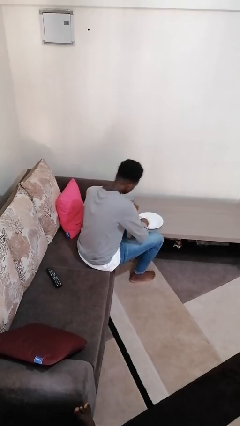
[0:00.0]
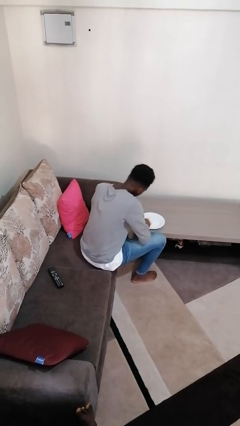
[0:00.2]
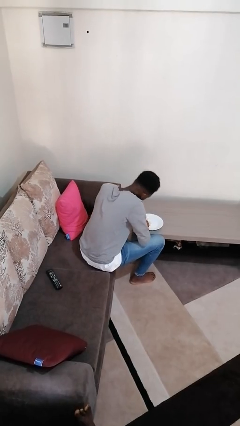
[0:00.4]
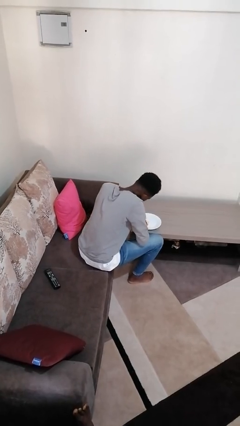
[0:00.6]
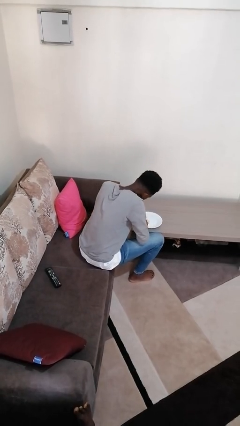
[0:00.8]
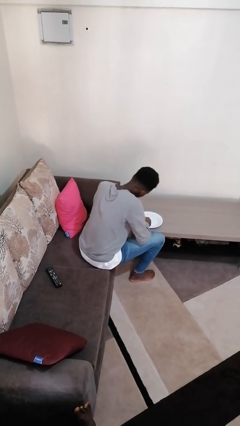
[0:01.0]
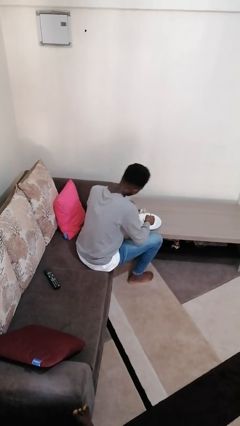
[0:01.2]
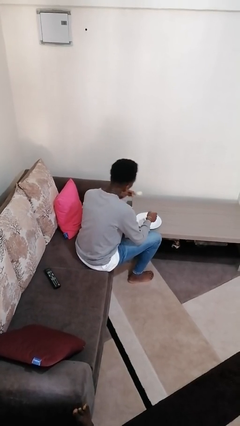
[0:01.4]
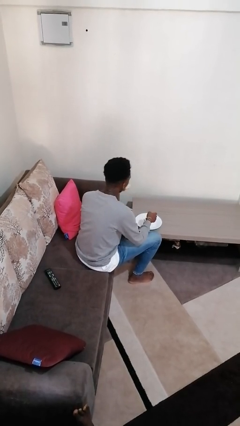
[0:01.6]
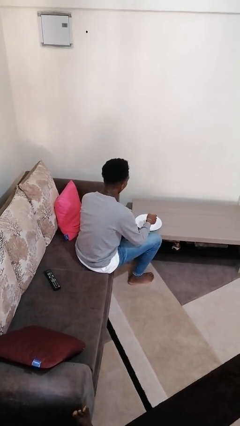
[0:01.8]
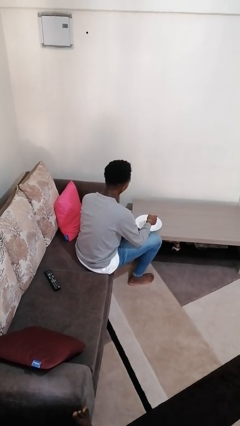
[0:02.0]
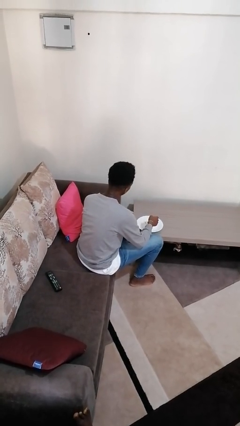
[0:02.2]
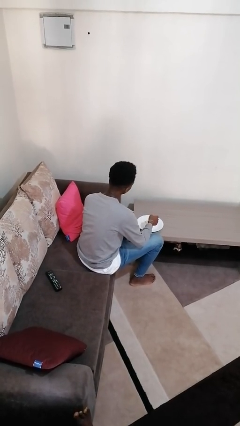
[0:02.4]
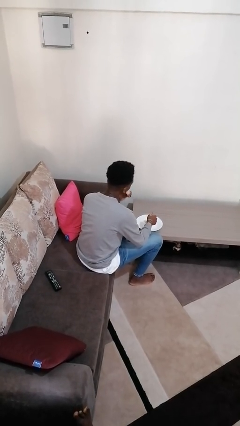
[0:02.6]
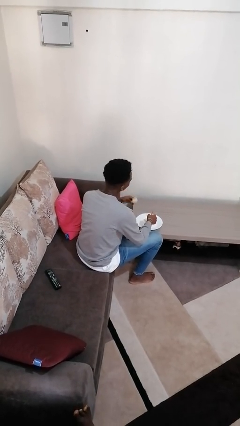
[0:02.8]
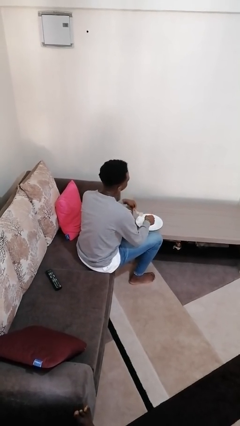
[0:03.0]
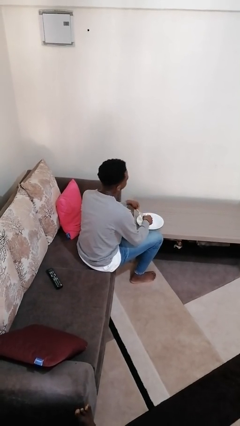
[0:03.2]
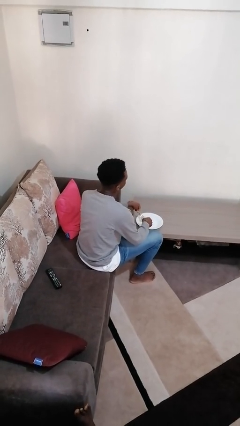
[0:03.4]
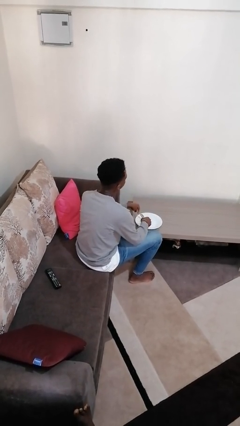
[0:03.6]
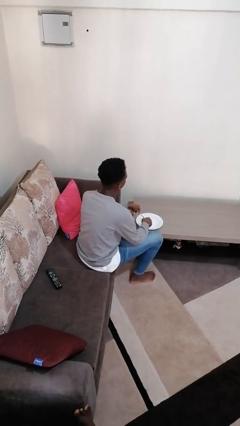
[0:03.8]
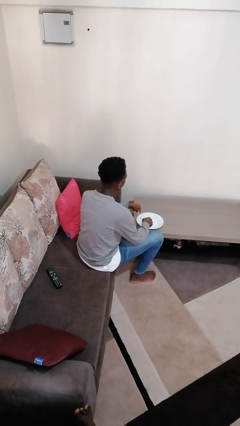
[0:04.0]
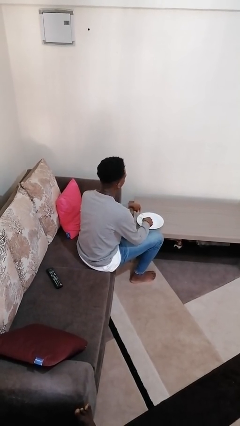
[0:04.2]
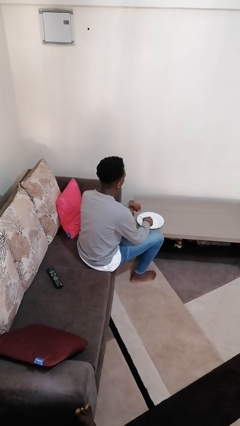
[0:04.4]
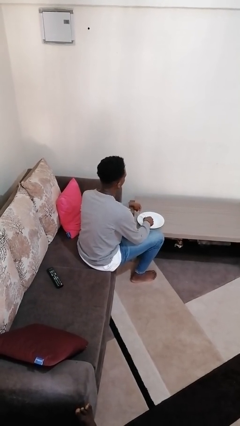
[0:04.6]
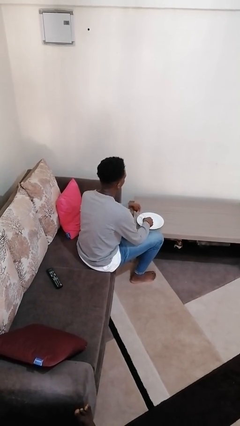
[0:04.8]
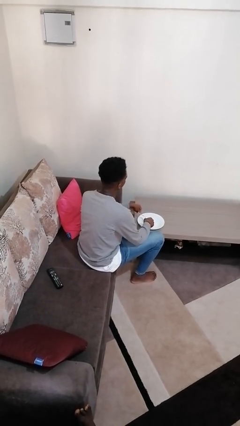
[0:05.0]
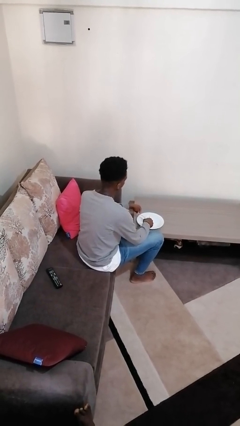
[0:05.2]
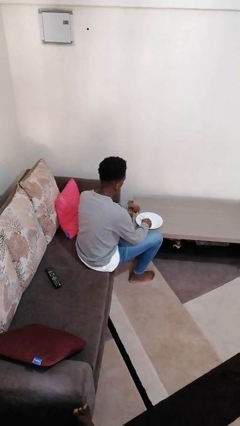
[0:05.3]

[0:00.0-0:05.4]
person eats with utensil

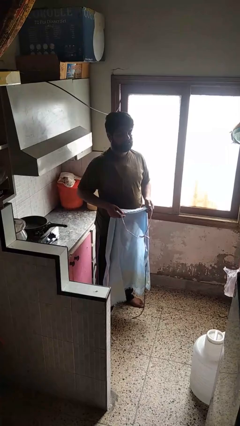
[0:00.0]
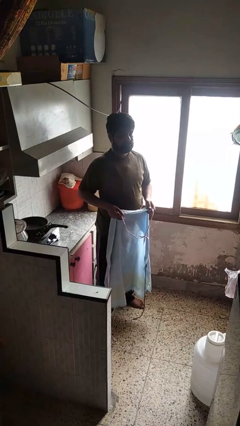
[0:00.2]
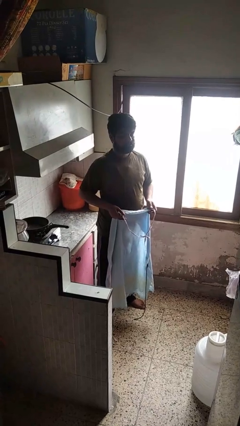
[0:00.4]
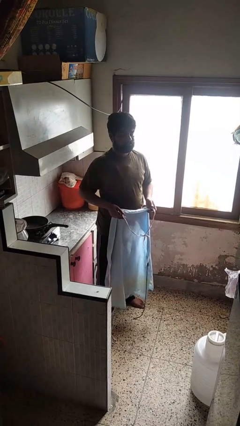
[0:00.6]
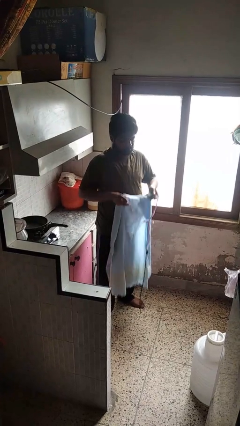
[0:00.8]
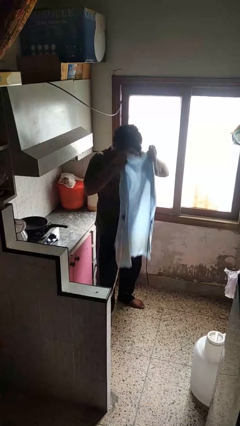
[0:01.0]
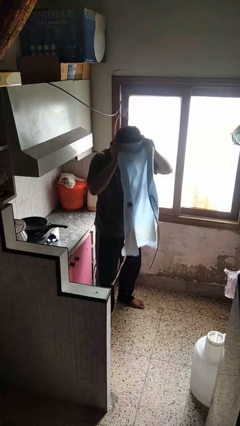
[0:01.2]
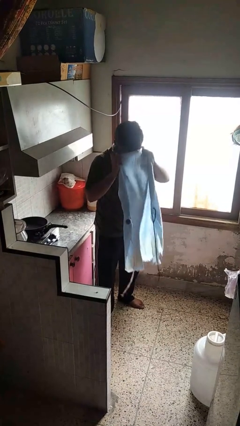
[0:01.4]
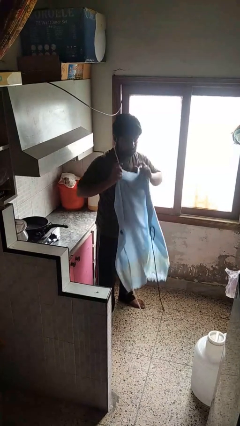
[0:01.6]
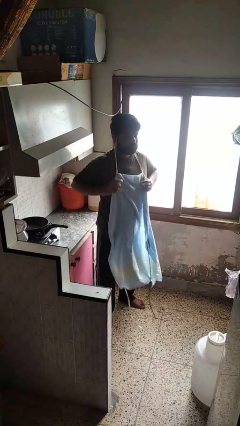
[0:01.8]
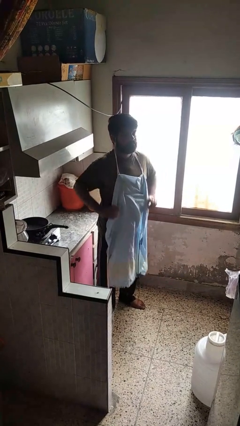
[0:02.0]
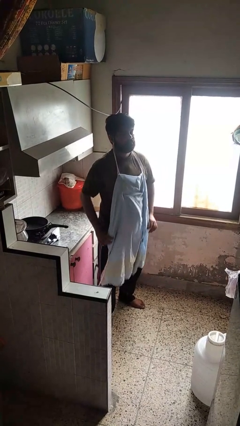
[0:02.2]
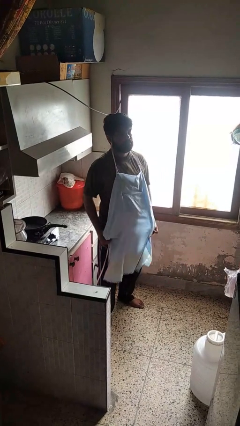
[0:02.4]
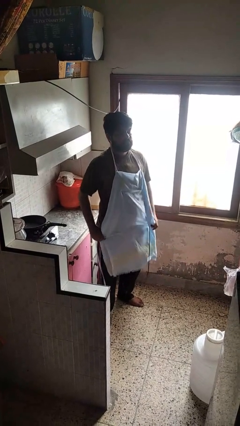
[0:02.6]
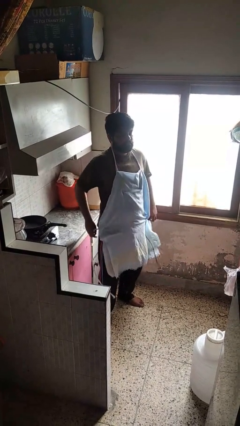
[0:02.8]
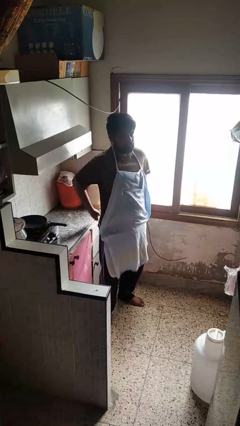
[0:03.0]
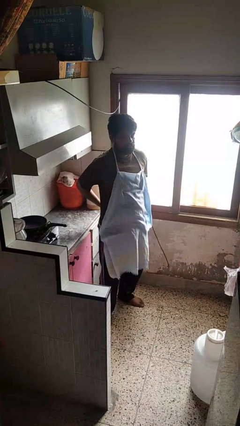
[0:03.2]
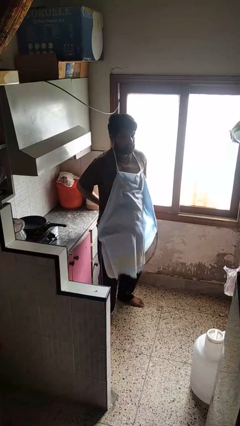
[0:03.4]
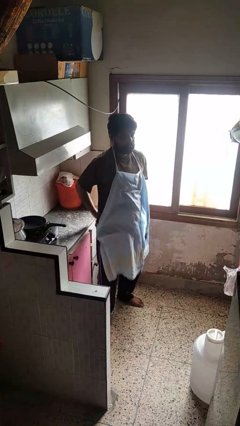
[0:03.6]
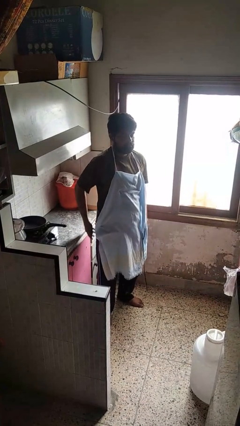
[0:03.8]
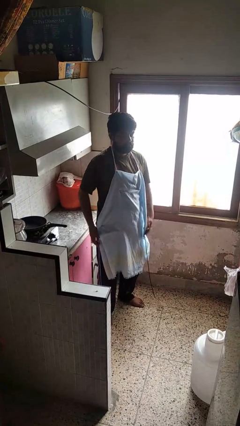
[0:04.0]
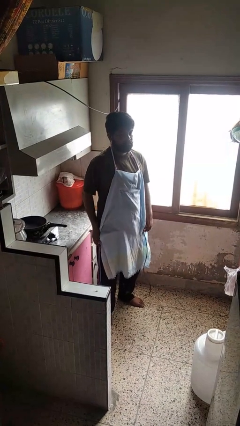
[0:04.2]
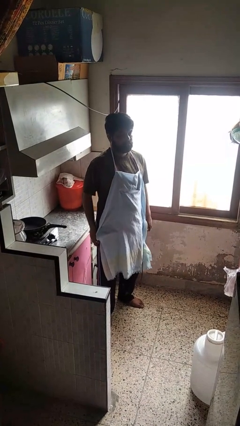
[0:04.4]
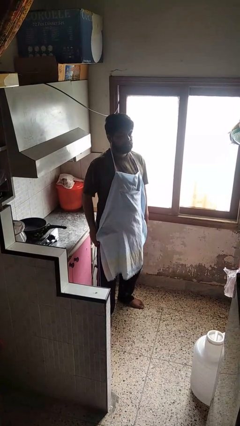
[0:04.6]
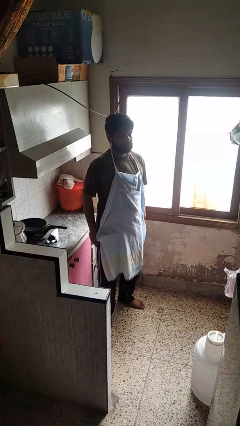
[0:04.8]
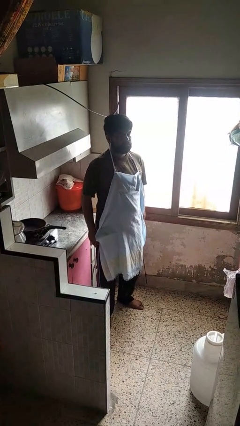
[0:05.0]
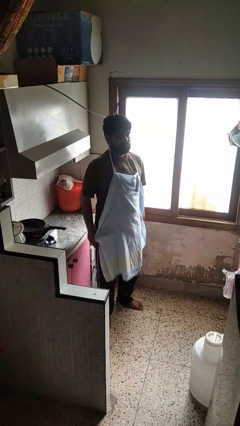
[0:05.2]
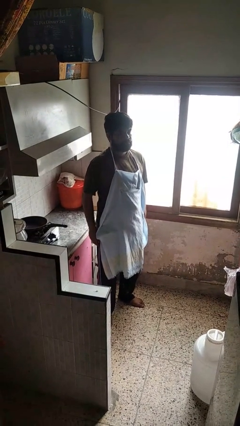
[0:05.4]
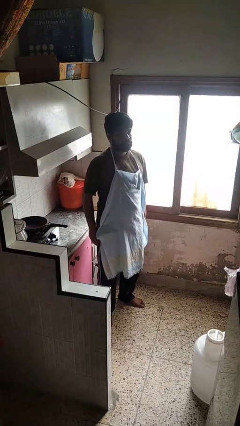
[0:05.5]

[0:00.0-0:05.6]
person puts on apron

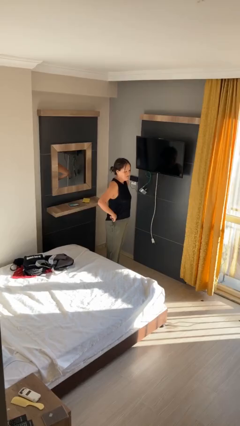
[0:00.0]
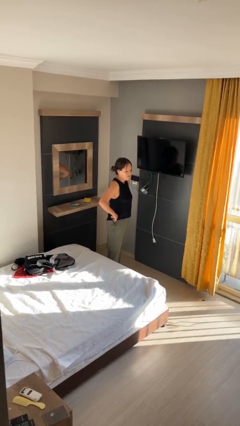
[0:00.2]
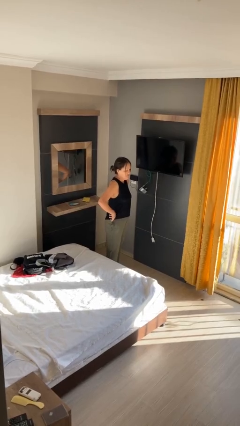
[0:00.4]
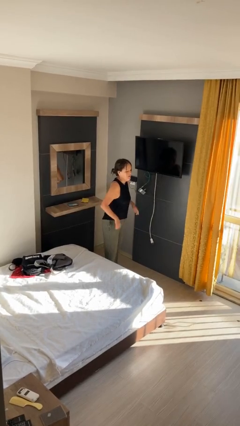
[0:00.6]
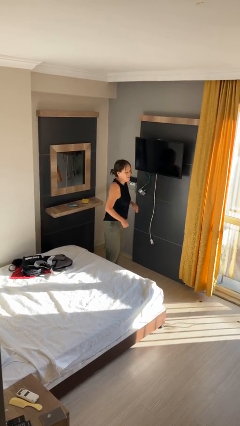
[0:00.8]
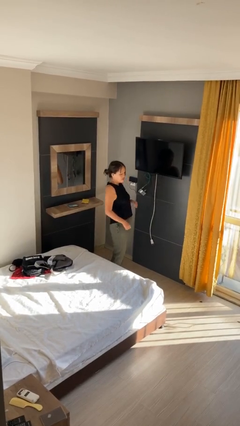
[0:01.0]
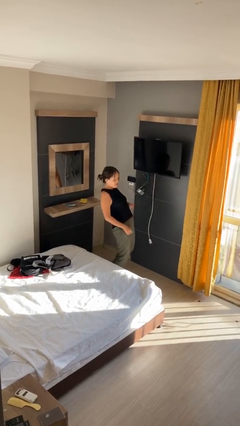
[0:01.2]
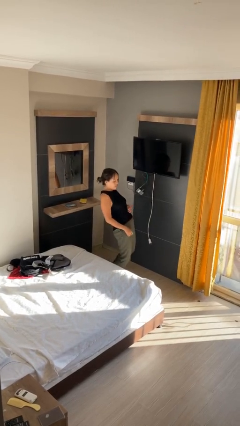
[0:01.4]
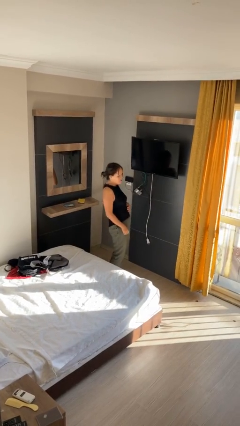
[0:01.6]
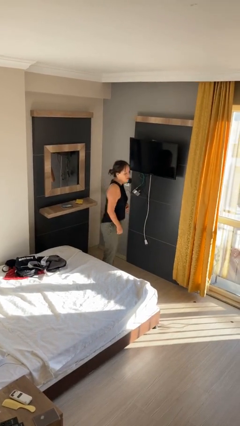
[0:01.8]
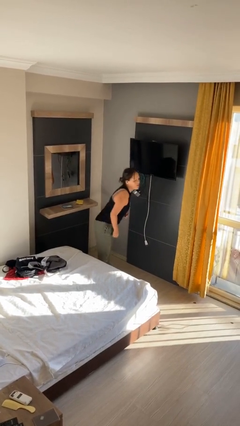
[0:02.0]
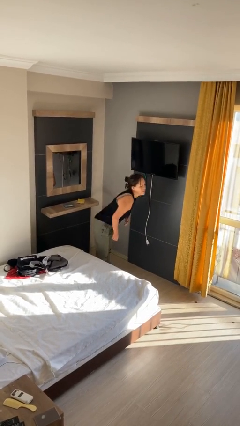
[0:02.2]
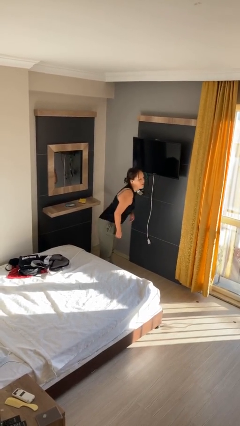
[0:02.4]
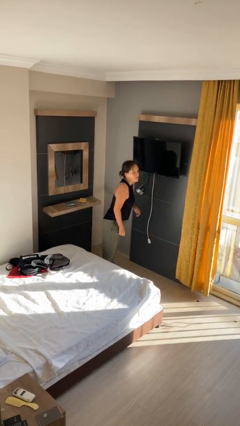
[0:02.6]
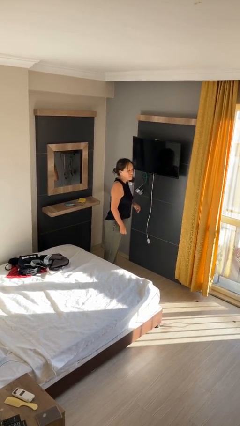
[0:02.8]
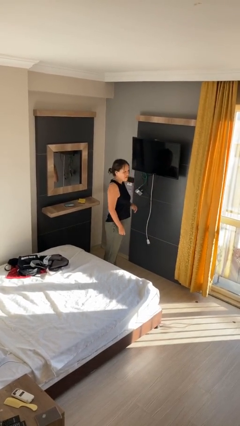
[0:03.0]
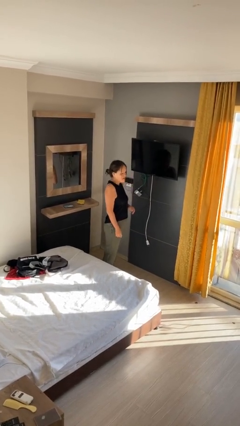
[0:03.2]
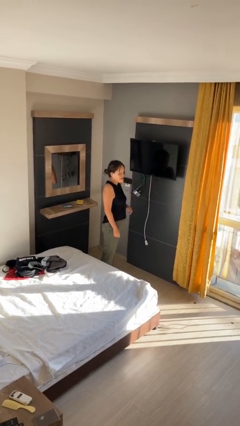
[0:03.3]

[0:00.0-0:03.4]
person wiggles hips

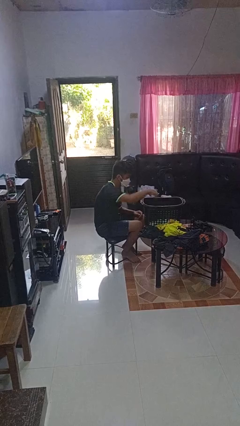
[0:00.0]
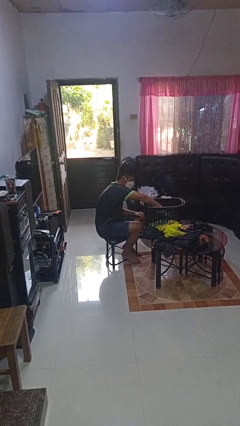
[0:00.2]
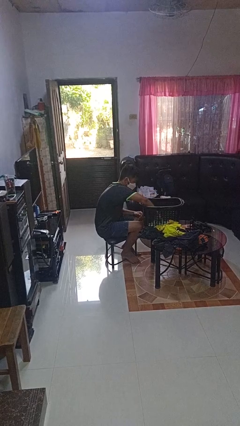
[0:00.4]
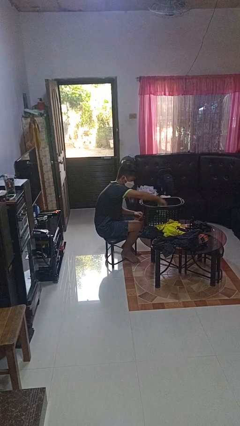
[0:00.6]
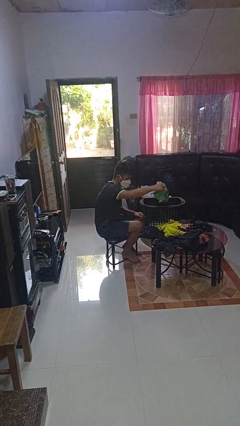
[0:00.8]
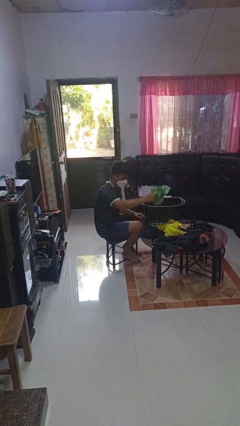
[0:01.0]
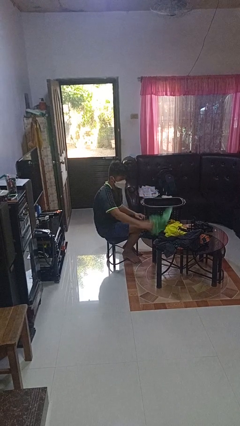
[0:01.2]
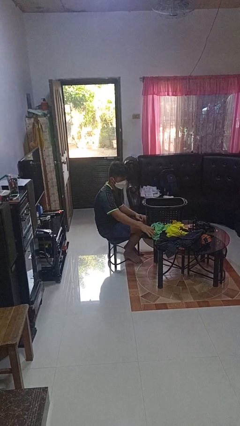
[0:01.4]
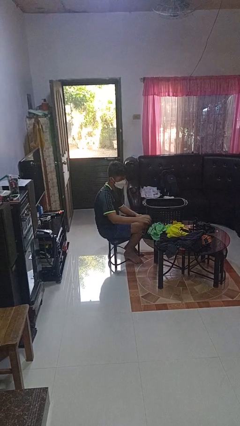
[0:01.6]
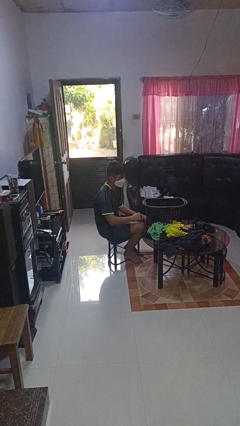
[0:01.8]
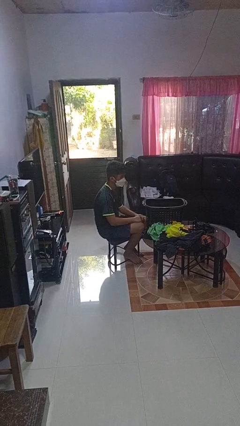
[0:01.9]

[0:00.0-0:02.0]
person takes object from basket

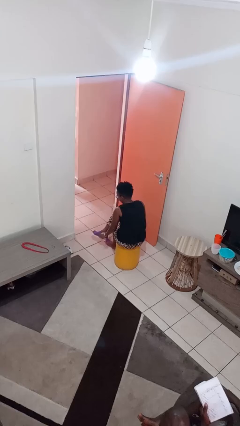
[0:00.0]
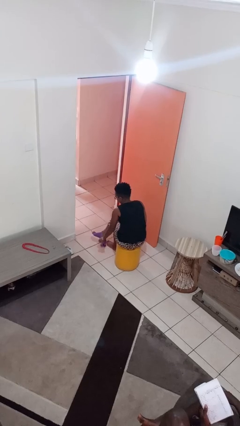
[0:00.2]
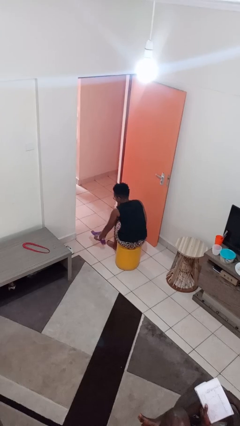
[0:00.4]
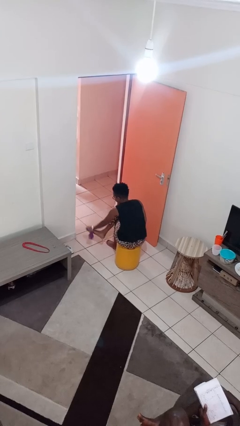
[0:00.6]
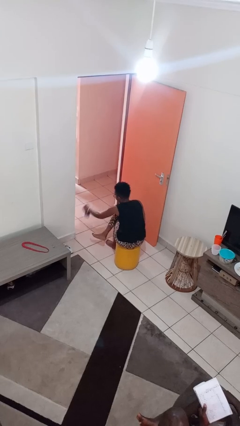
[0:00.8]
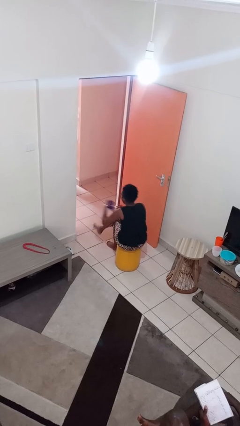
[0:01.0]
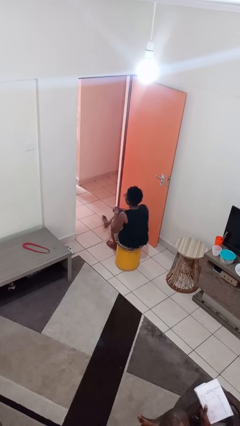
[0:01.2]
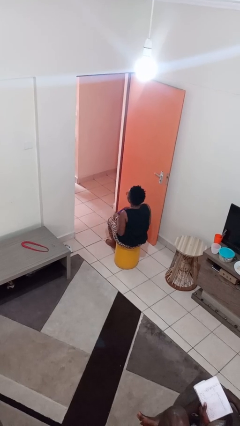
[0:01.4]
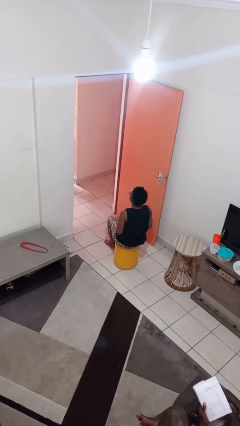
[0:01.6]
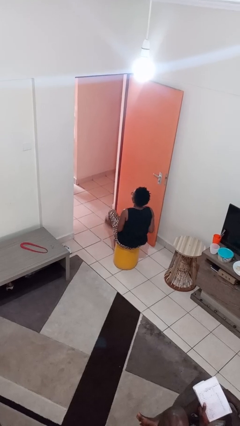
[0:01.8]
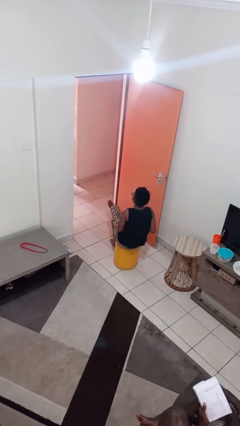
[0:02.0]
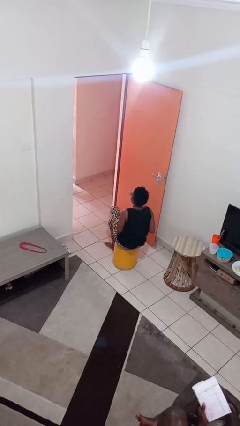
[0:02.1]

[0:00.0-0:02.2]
person takes off socks
